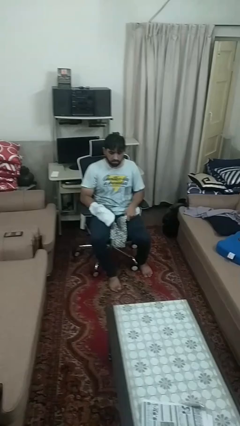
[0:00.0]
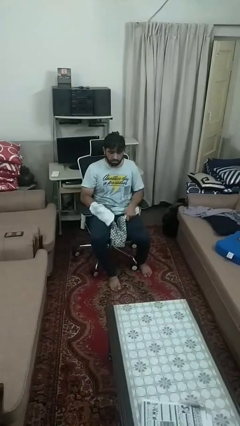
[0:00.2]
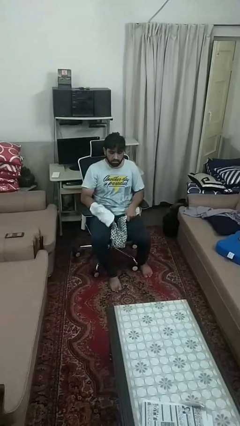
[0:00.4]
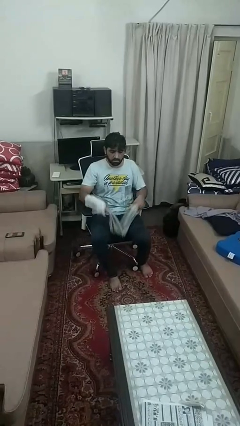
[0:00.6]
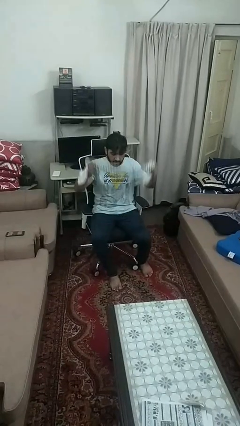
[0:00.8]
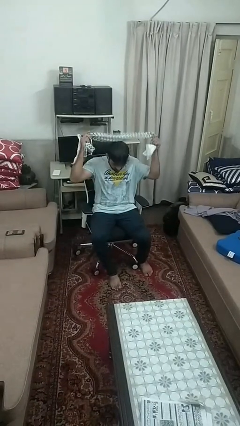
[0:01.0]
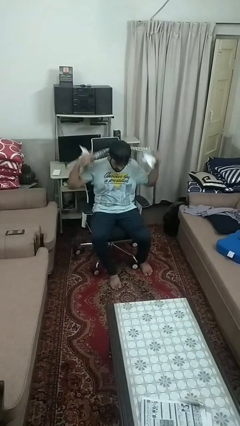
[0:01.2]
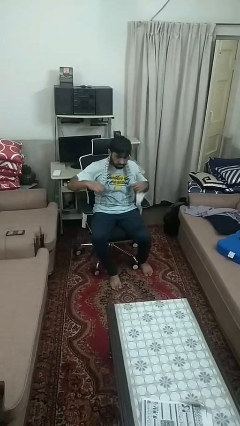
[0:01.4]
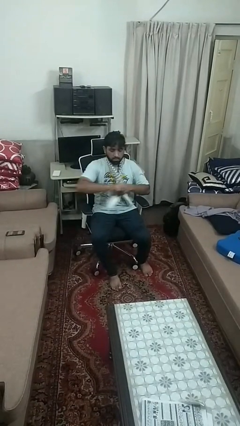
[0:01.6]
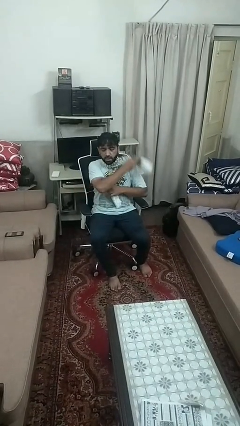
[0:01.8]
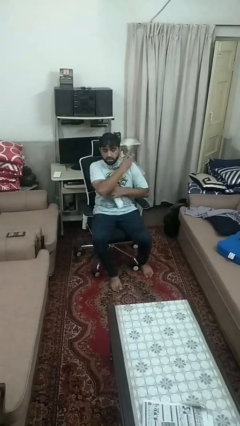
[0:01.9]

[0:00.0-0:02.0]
person puts on scarf

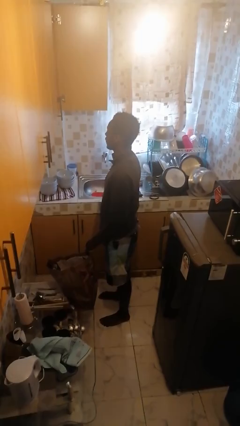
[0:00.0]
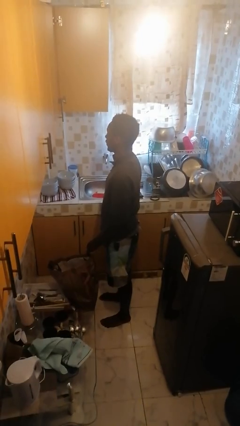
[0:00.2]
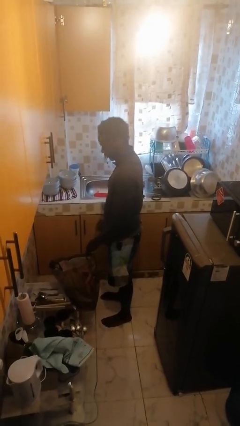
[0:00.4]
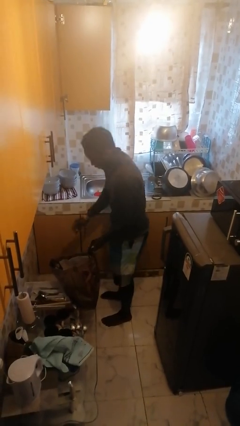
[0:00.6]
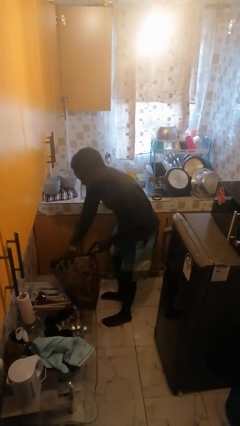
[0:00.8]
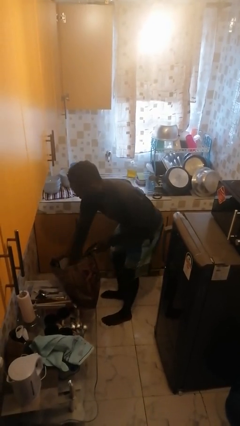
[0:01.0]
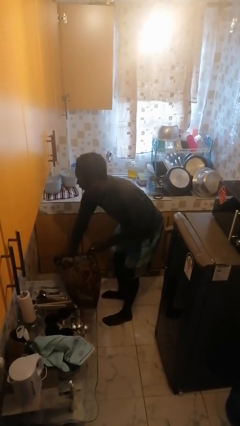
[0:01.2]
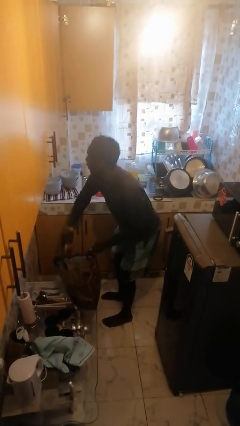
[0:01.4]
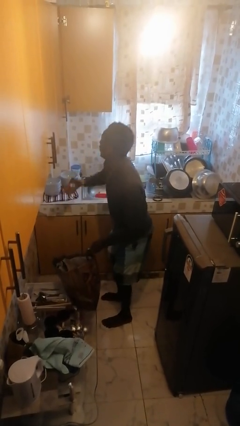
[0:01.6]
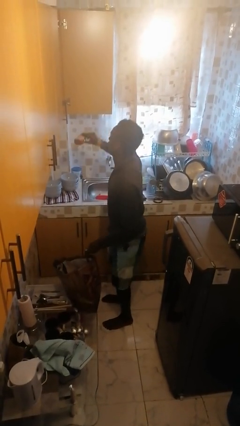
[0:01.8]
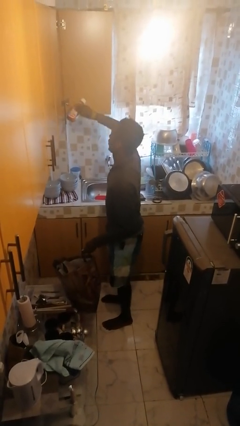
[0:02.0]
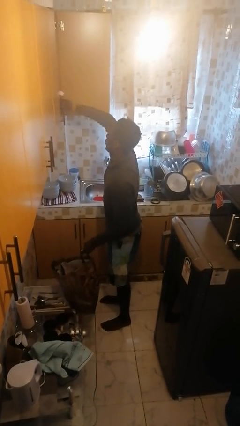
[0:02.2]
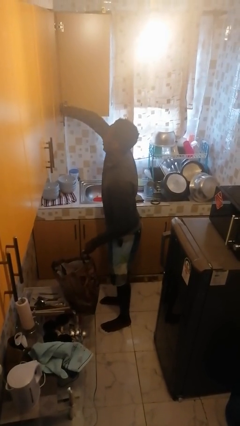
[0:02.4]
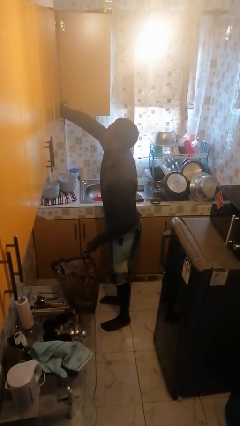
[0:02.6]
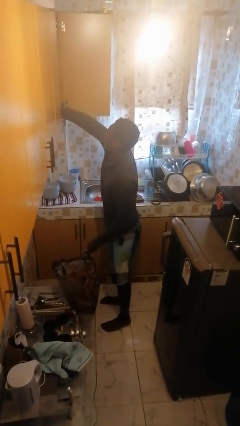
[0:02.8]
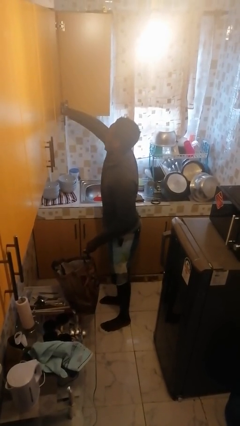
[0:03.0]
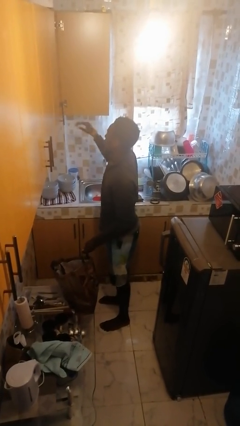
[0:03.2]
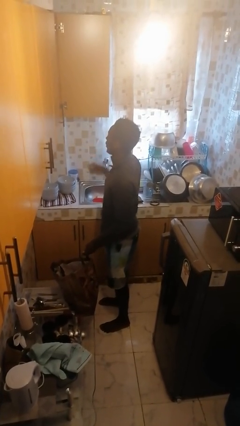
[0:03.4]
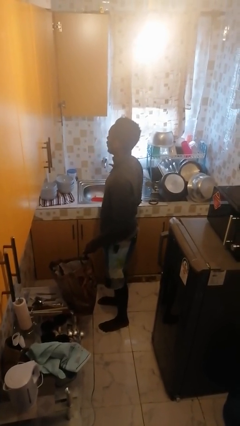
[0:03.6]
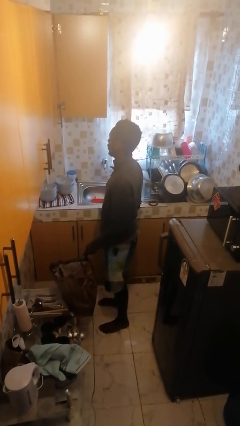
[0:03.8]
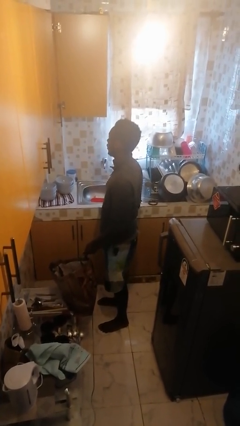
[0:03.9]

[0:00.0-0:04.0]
person loads groceries into cabinet

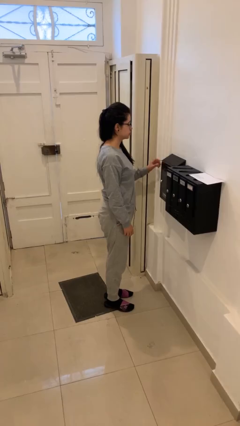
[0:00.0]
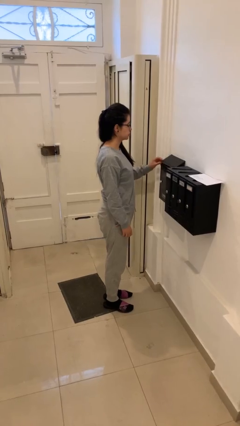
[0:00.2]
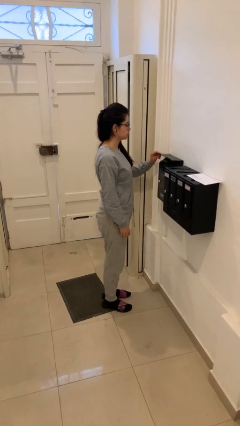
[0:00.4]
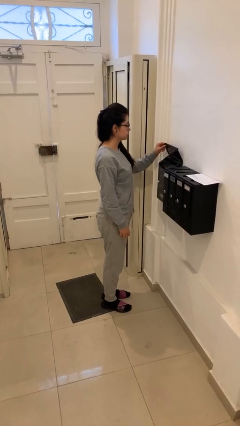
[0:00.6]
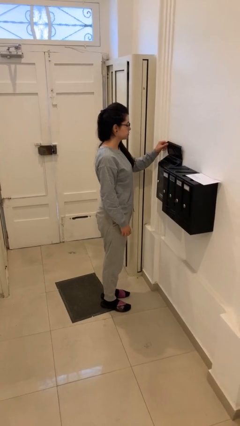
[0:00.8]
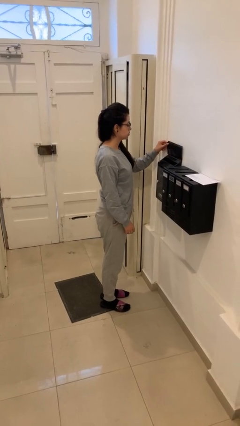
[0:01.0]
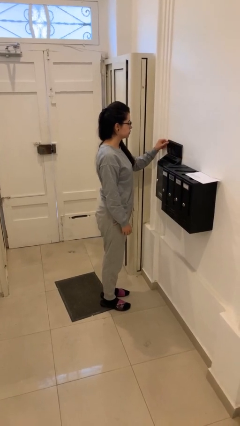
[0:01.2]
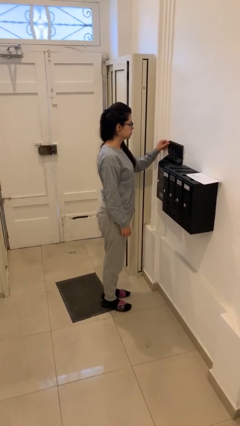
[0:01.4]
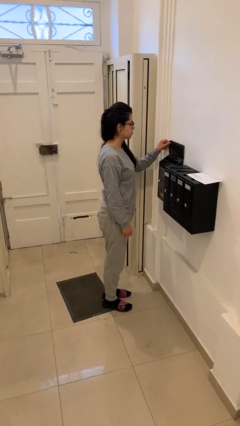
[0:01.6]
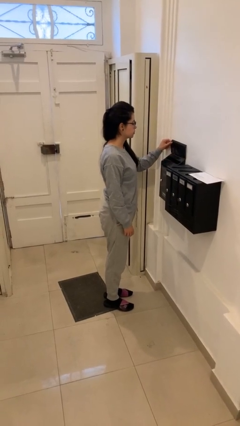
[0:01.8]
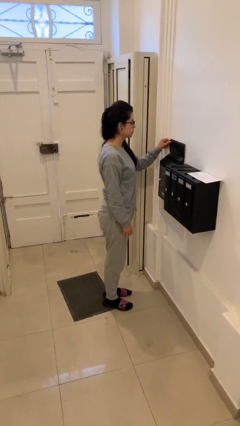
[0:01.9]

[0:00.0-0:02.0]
person opens mailbox

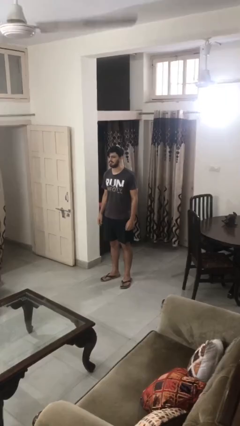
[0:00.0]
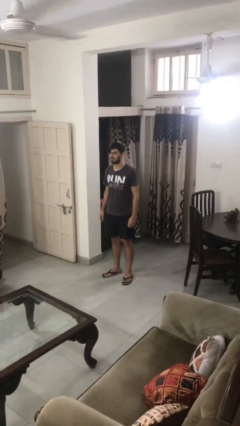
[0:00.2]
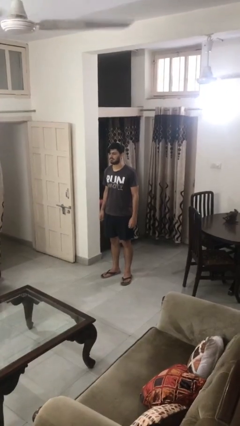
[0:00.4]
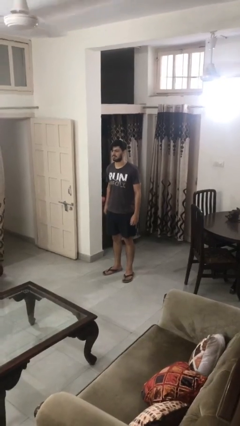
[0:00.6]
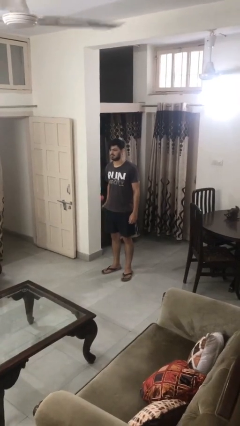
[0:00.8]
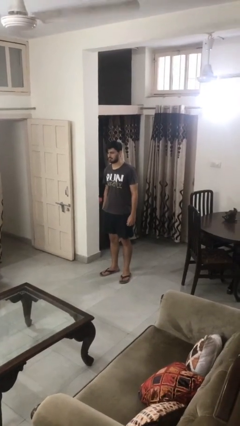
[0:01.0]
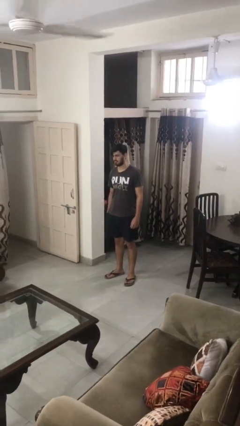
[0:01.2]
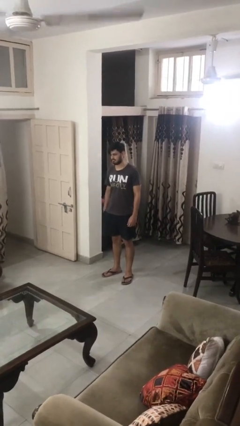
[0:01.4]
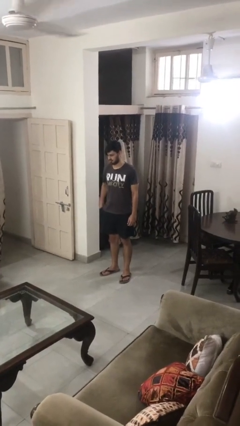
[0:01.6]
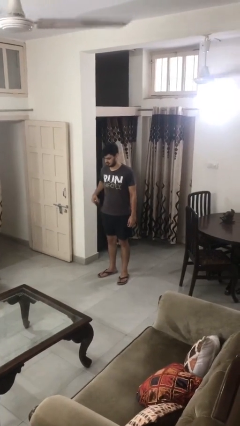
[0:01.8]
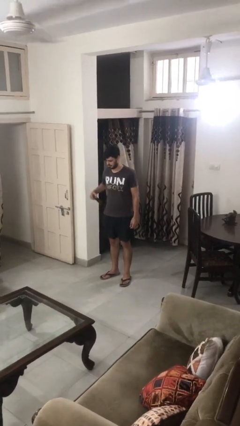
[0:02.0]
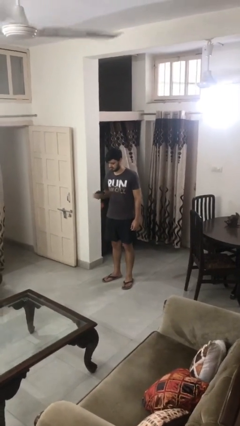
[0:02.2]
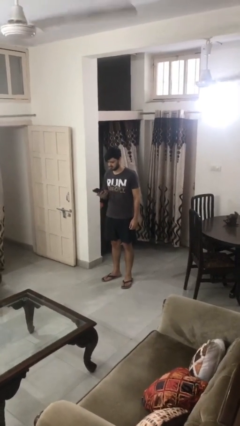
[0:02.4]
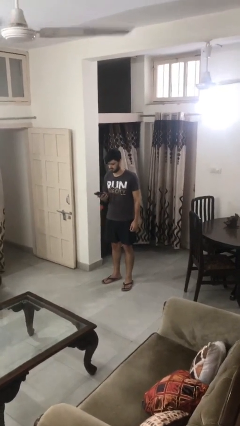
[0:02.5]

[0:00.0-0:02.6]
person takes phone from pocket

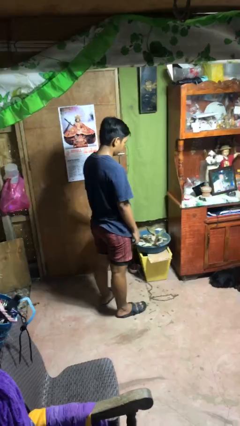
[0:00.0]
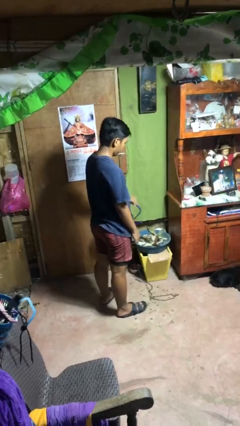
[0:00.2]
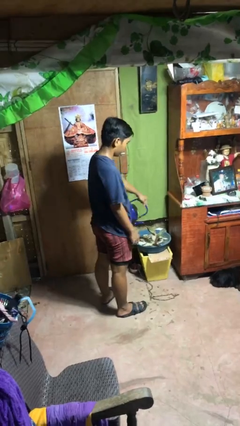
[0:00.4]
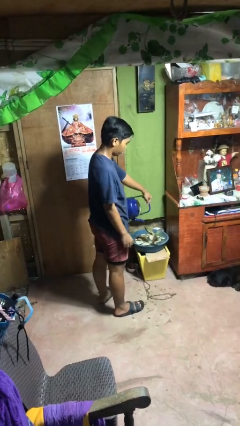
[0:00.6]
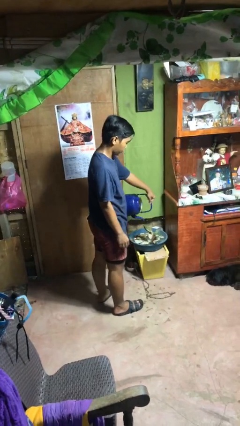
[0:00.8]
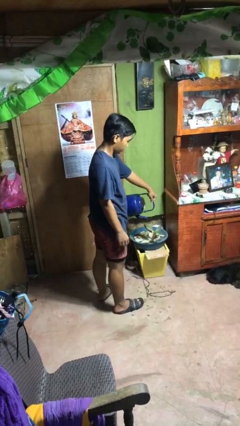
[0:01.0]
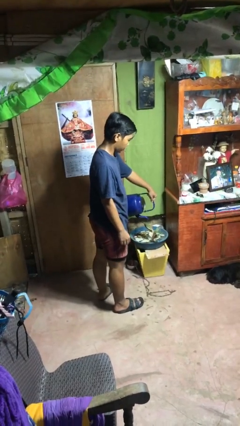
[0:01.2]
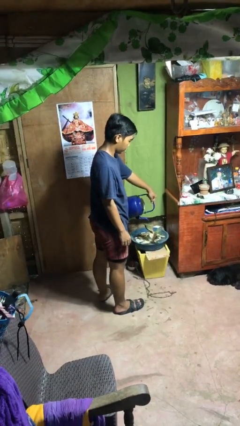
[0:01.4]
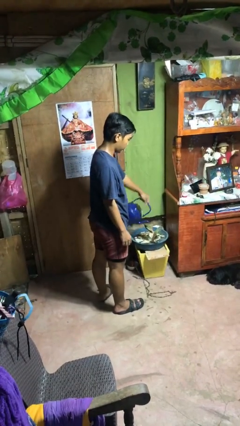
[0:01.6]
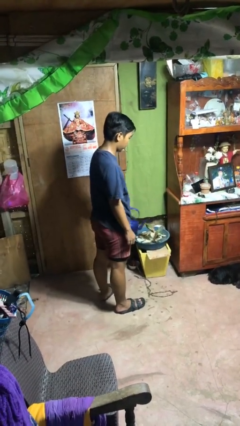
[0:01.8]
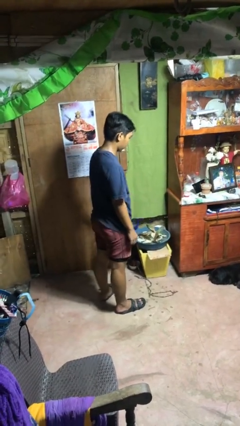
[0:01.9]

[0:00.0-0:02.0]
person waters houseplant

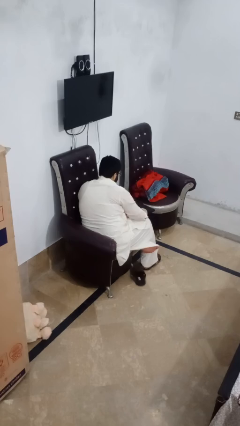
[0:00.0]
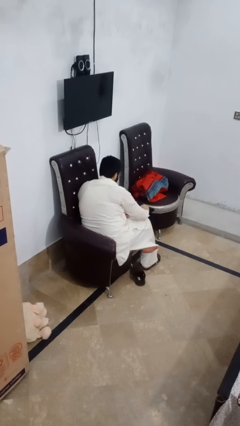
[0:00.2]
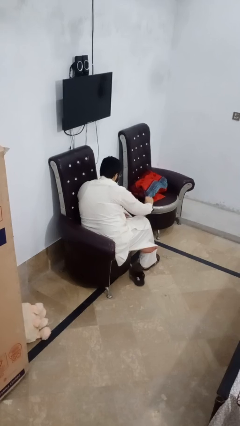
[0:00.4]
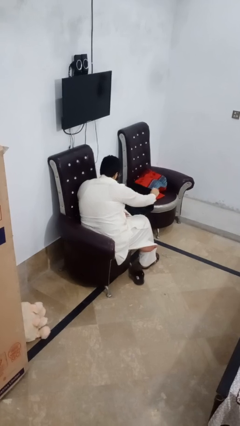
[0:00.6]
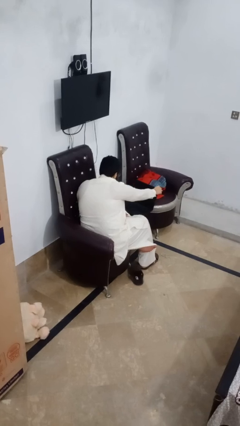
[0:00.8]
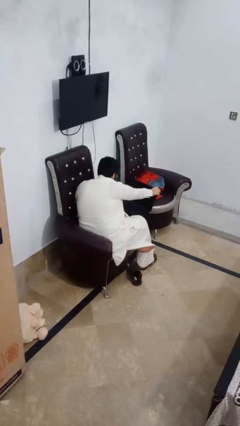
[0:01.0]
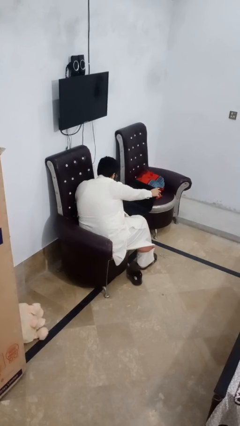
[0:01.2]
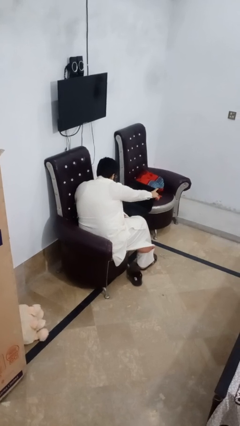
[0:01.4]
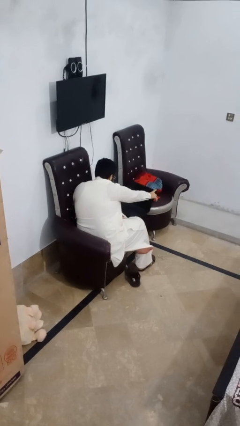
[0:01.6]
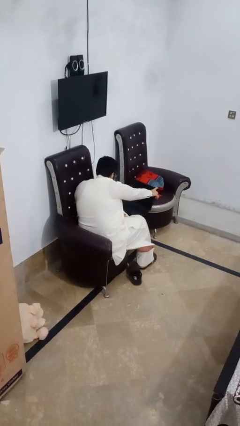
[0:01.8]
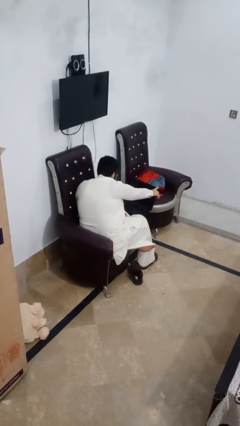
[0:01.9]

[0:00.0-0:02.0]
person opens laptop

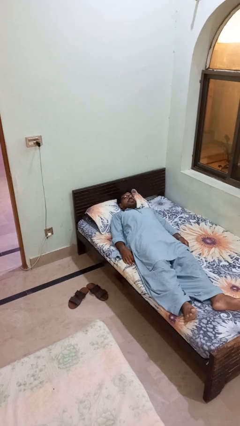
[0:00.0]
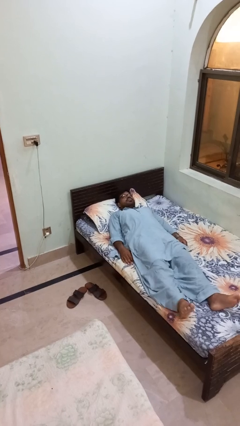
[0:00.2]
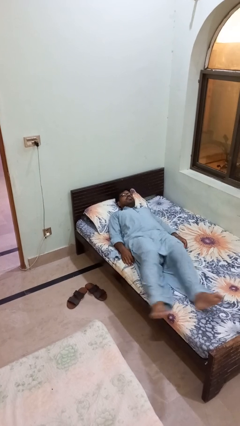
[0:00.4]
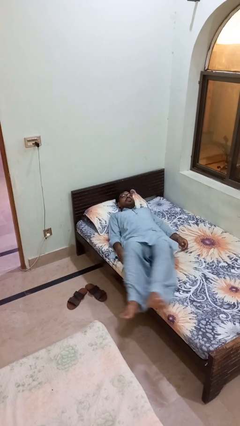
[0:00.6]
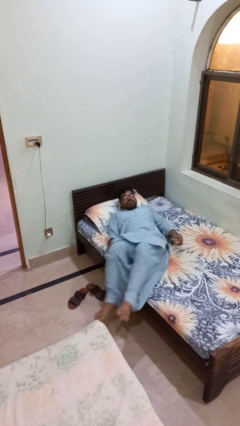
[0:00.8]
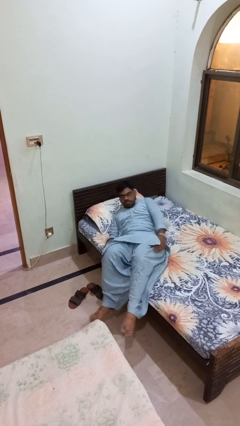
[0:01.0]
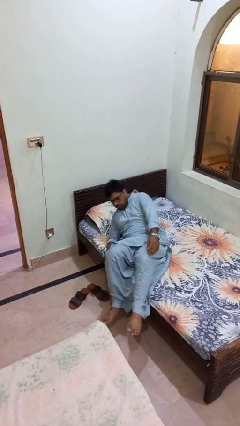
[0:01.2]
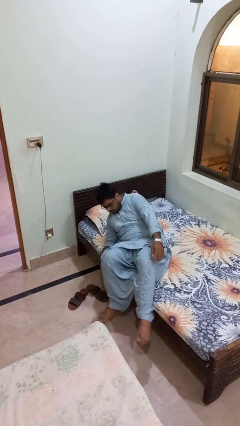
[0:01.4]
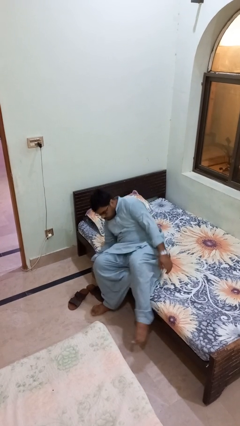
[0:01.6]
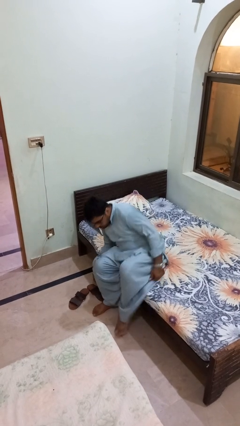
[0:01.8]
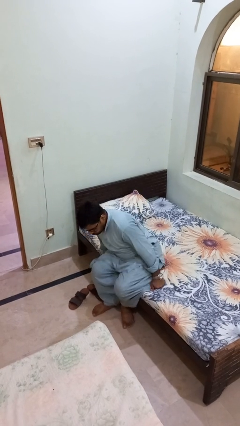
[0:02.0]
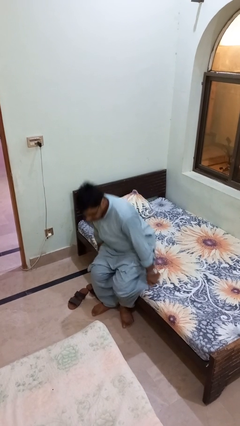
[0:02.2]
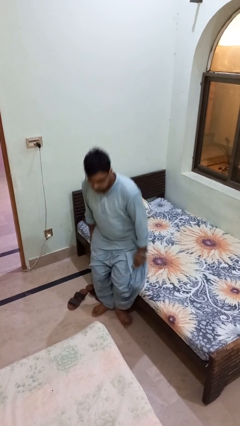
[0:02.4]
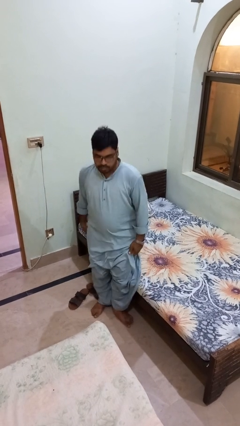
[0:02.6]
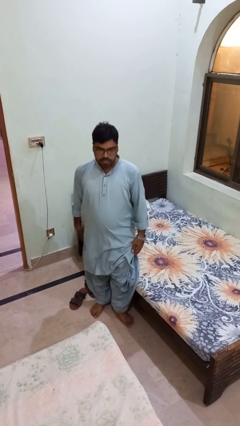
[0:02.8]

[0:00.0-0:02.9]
person stands up
